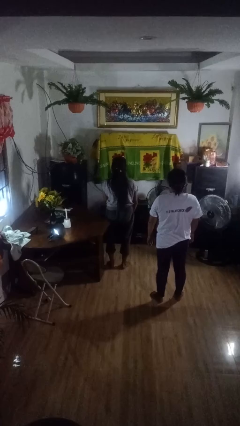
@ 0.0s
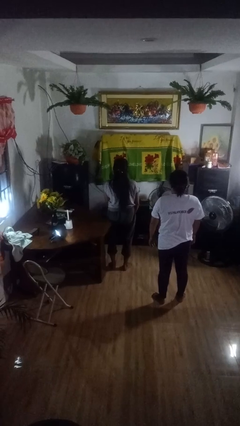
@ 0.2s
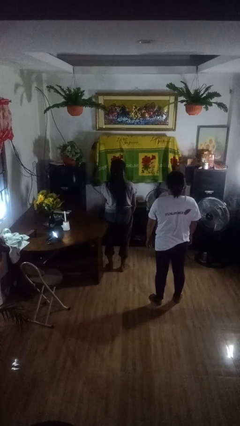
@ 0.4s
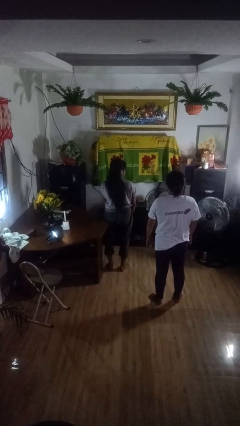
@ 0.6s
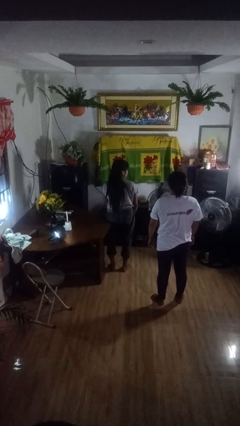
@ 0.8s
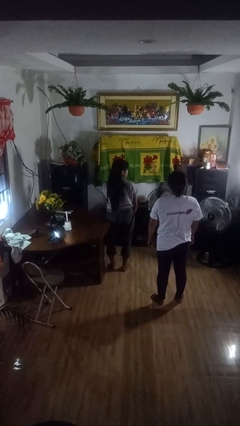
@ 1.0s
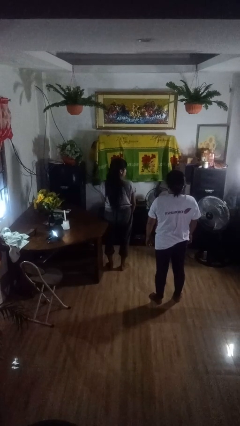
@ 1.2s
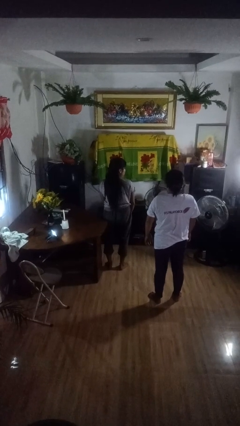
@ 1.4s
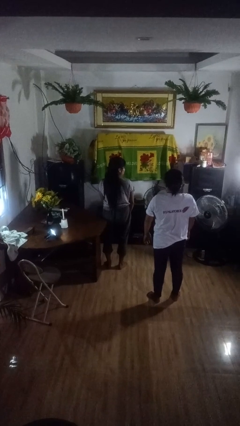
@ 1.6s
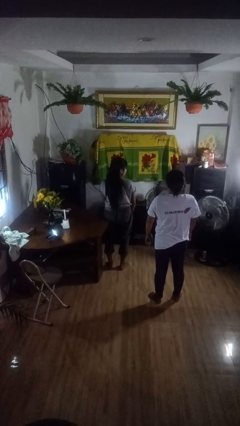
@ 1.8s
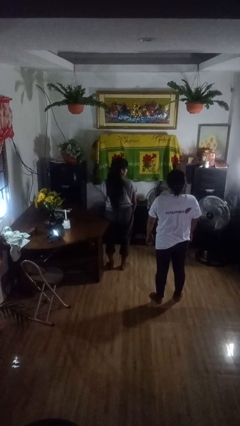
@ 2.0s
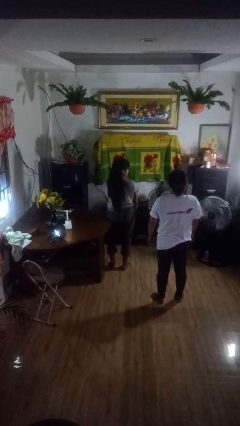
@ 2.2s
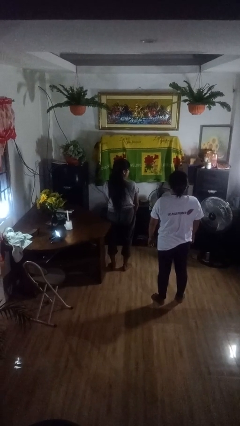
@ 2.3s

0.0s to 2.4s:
person looks over shoulder

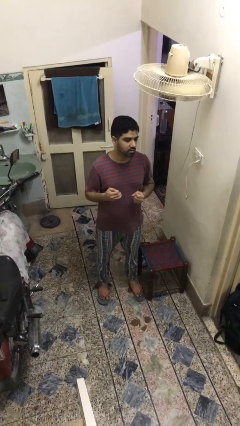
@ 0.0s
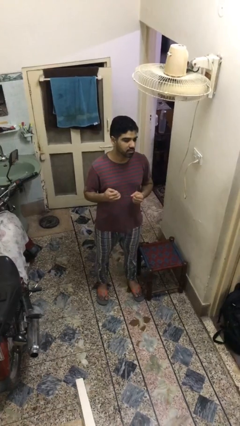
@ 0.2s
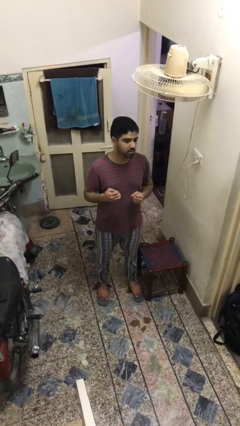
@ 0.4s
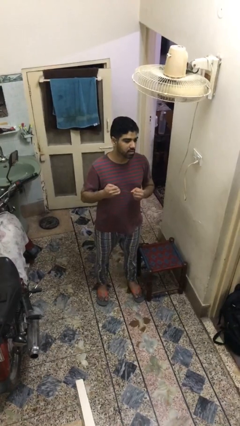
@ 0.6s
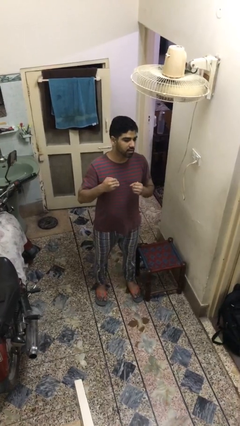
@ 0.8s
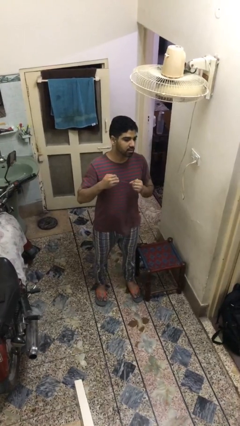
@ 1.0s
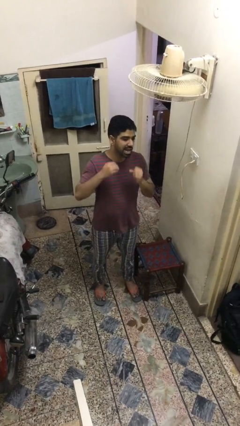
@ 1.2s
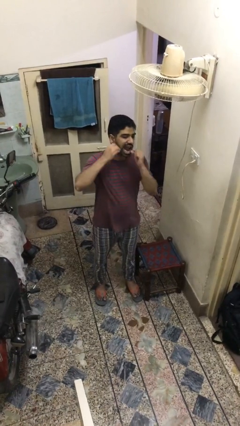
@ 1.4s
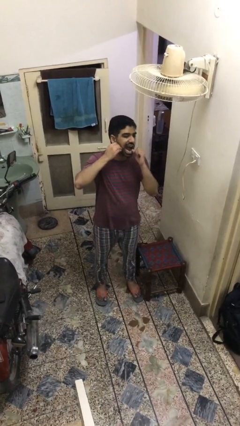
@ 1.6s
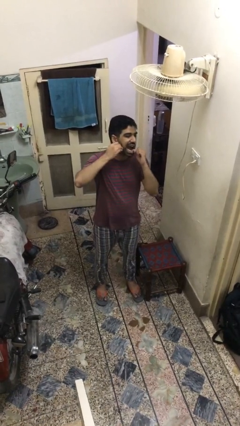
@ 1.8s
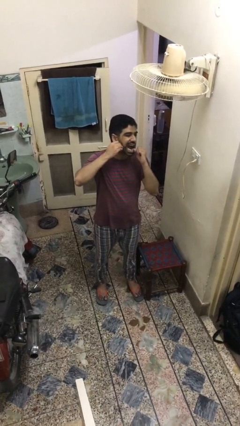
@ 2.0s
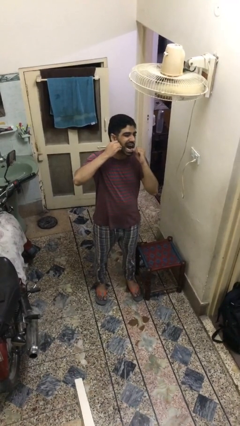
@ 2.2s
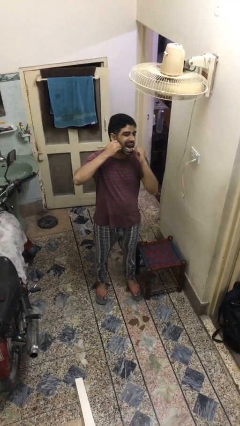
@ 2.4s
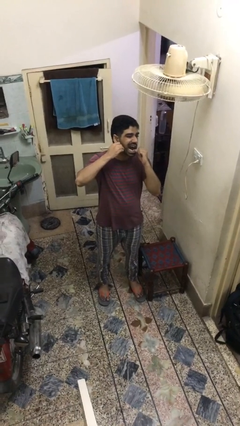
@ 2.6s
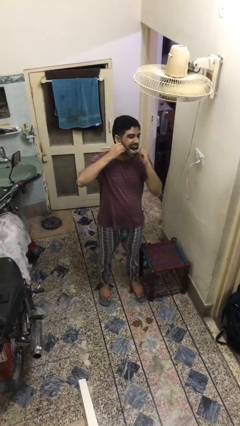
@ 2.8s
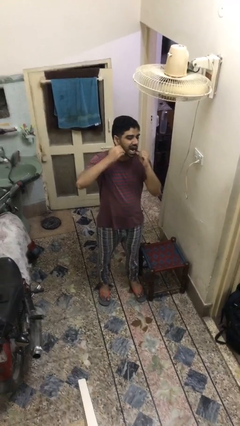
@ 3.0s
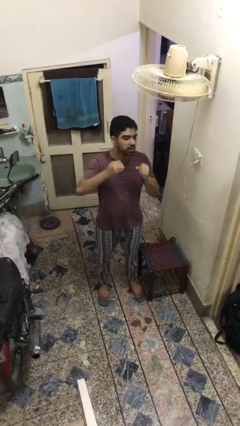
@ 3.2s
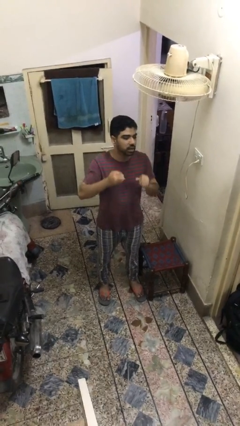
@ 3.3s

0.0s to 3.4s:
person flosses

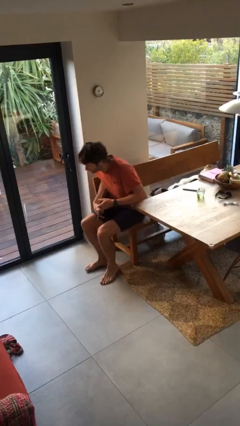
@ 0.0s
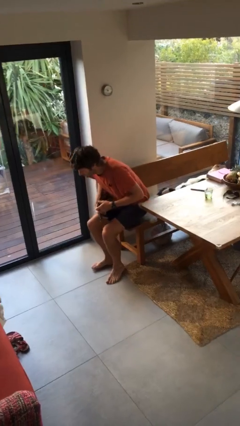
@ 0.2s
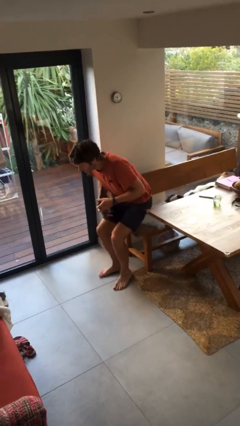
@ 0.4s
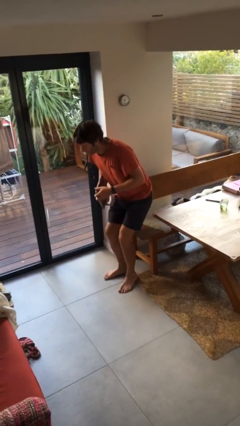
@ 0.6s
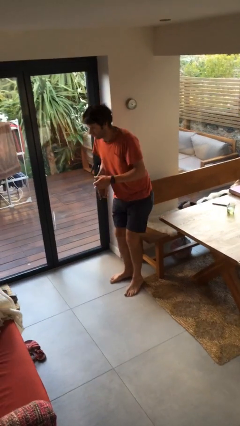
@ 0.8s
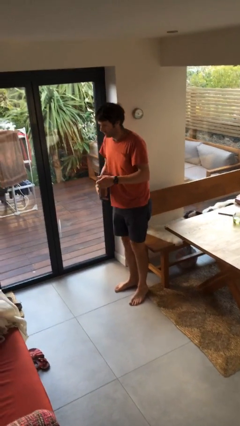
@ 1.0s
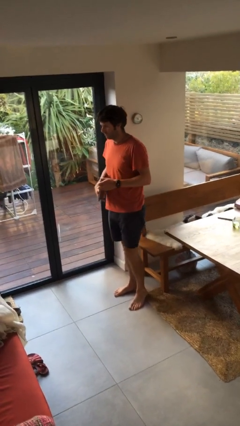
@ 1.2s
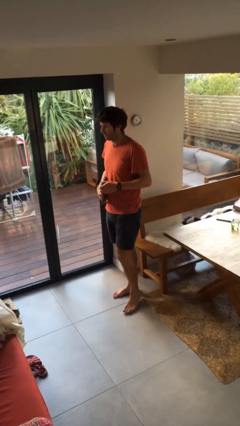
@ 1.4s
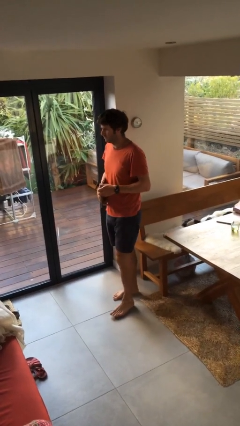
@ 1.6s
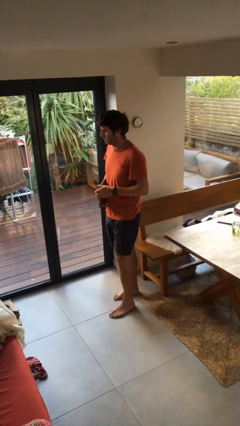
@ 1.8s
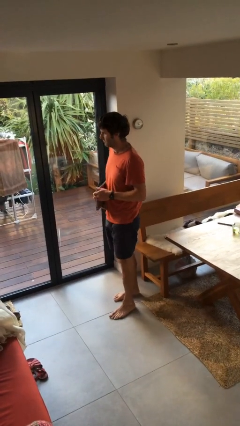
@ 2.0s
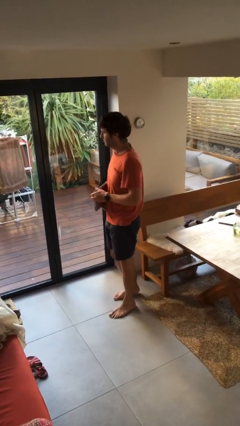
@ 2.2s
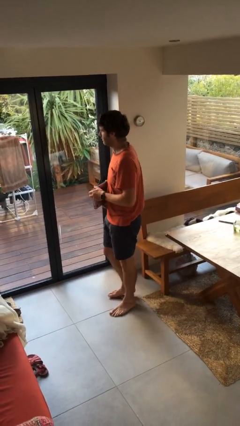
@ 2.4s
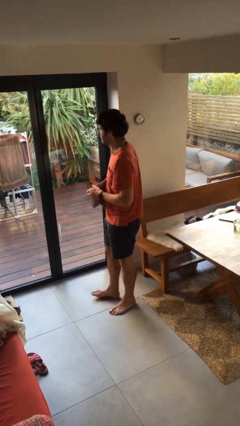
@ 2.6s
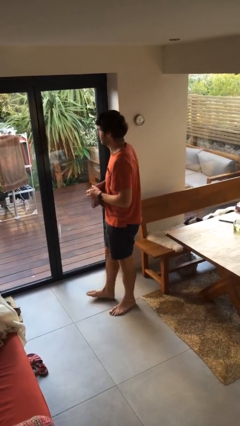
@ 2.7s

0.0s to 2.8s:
person stands up

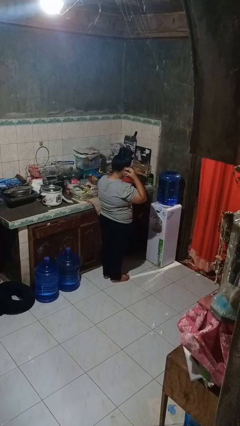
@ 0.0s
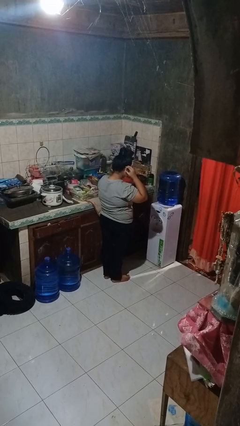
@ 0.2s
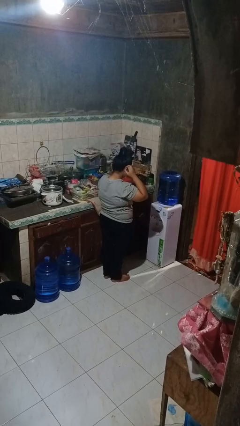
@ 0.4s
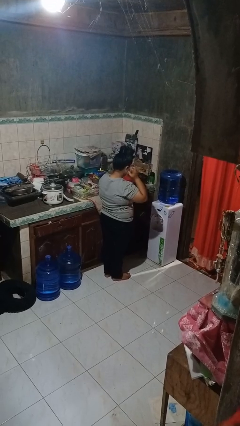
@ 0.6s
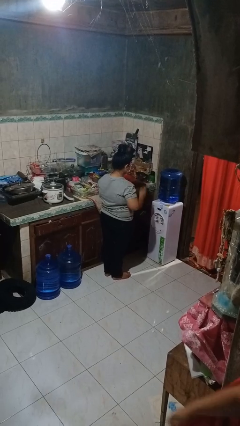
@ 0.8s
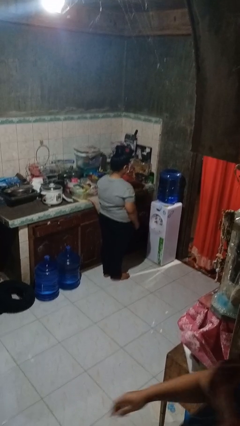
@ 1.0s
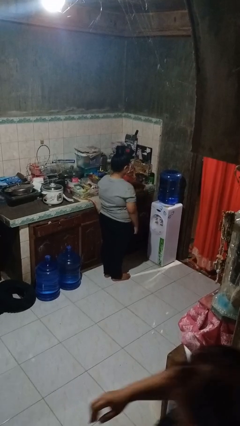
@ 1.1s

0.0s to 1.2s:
person puts on facemask

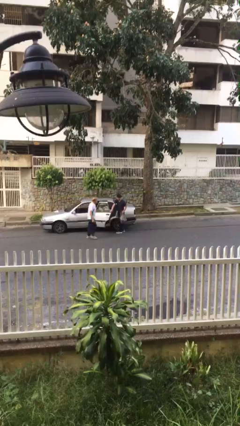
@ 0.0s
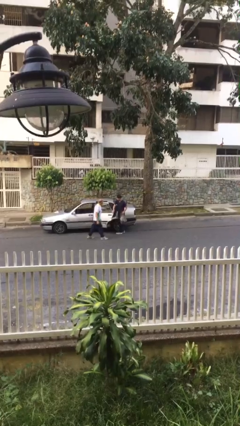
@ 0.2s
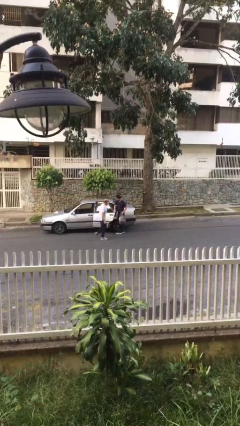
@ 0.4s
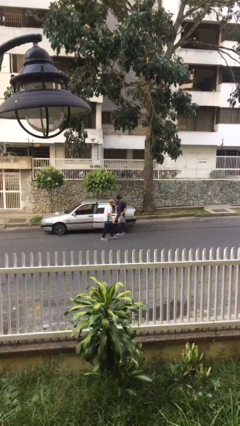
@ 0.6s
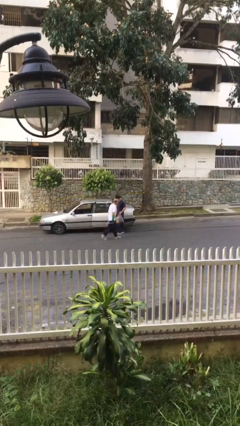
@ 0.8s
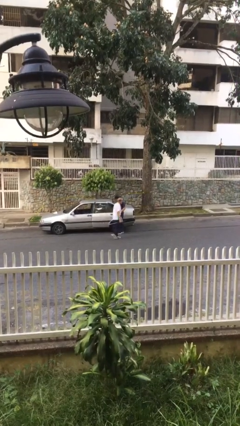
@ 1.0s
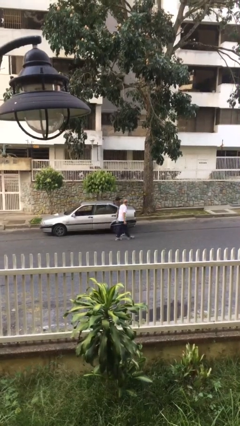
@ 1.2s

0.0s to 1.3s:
person closes car door

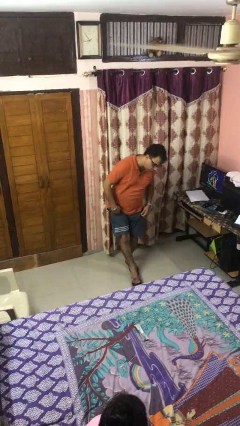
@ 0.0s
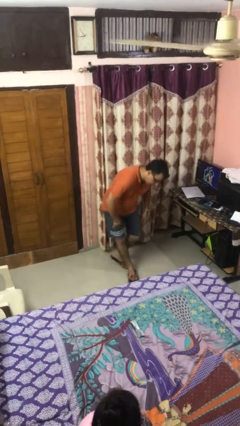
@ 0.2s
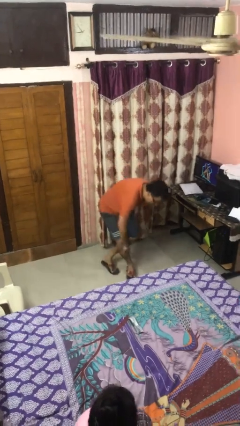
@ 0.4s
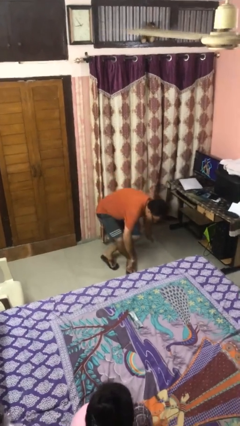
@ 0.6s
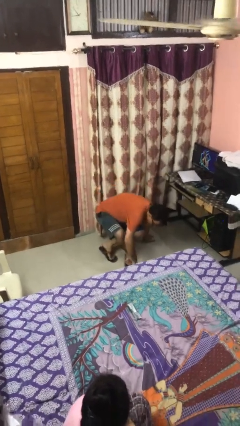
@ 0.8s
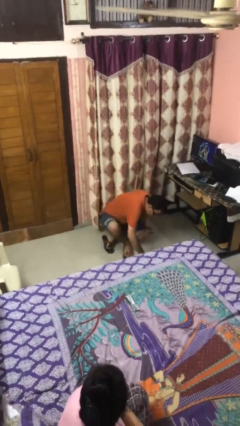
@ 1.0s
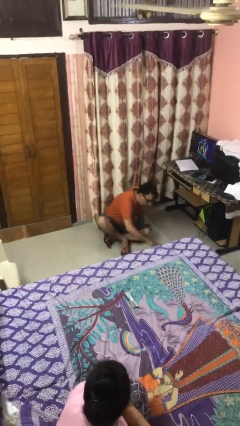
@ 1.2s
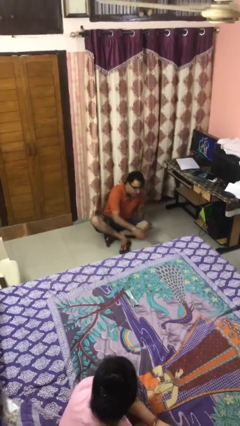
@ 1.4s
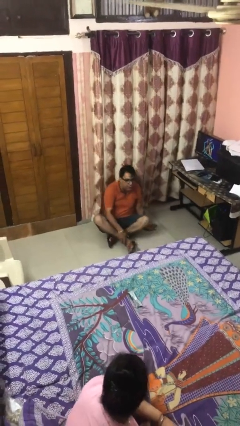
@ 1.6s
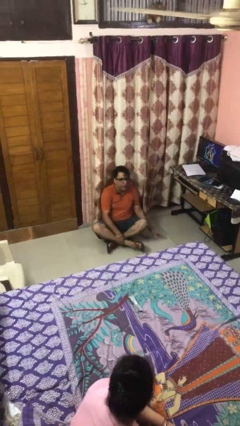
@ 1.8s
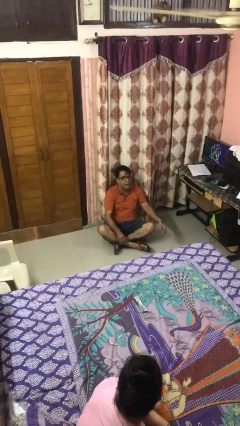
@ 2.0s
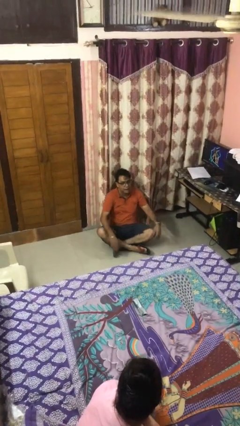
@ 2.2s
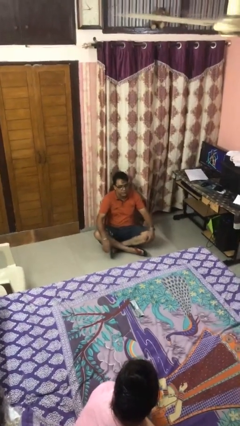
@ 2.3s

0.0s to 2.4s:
person sits crisscross

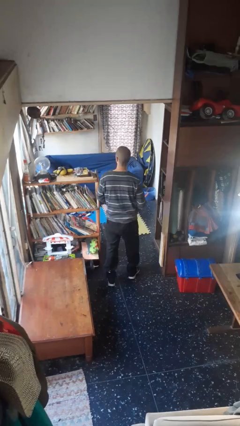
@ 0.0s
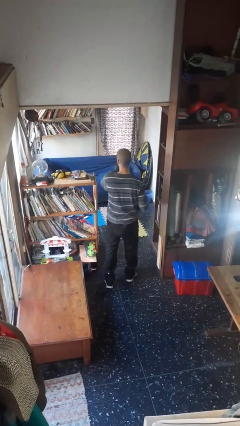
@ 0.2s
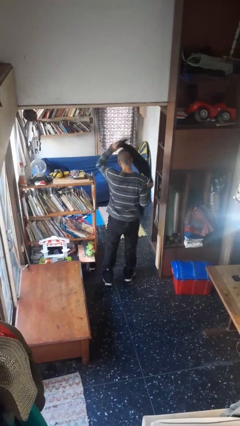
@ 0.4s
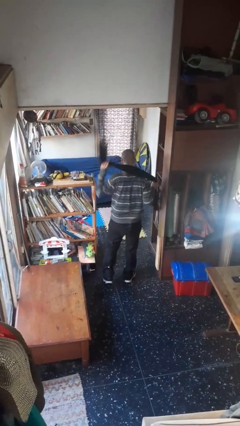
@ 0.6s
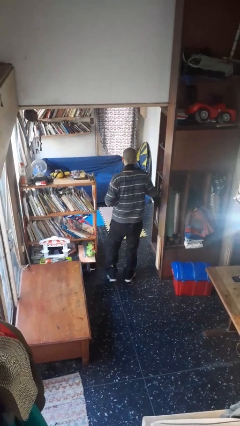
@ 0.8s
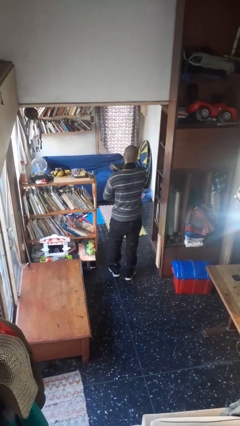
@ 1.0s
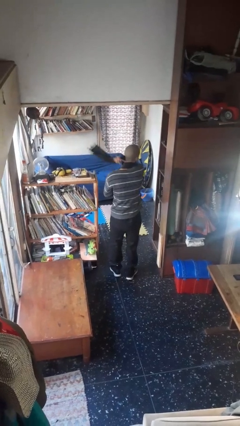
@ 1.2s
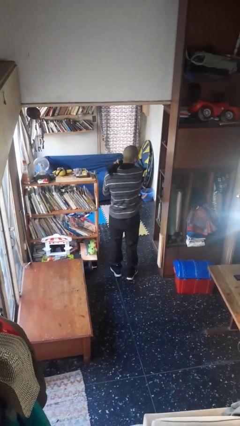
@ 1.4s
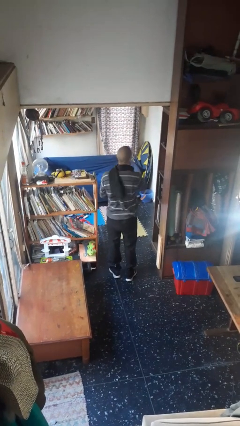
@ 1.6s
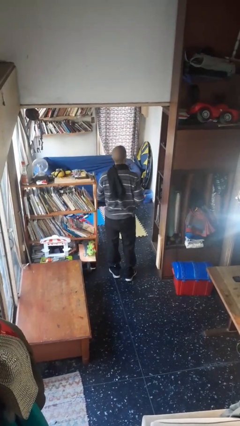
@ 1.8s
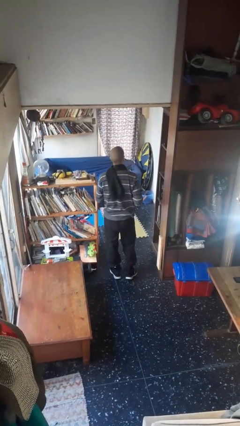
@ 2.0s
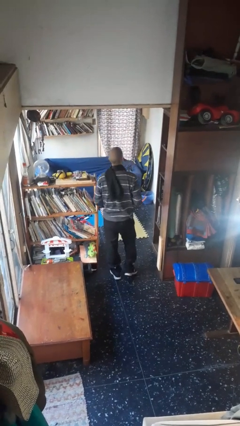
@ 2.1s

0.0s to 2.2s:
person puts on scarf

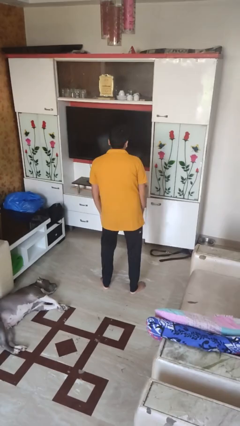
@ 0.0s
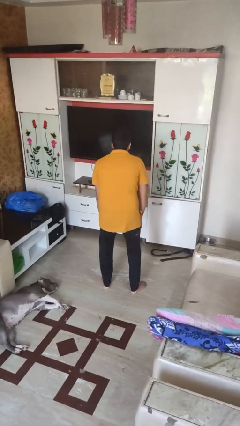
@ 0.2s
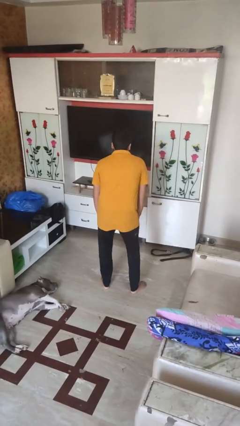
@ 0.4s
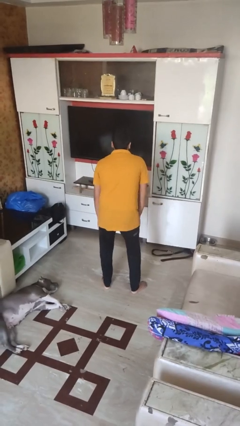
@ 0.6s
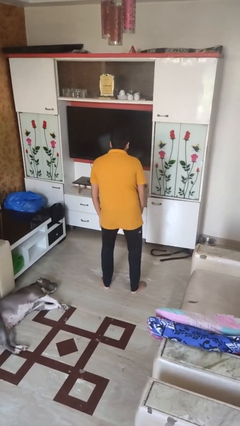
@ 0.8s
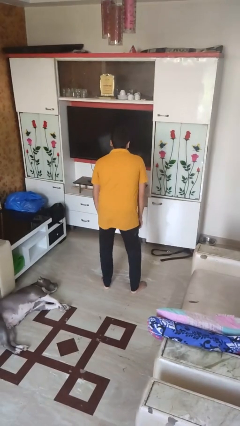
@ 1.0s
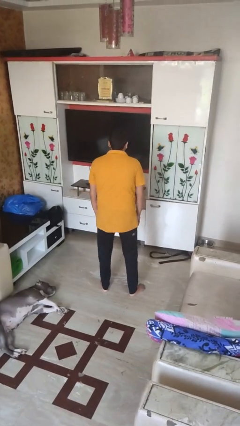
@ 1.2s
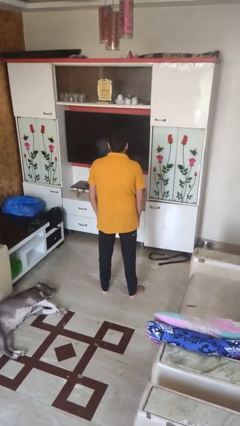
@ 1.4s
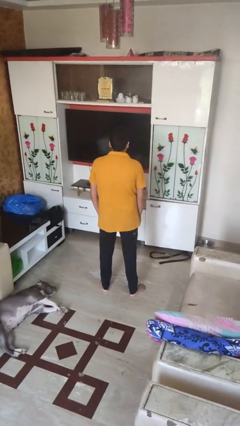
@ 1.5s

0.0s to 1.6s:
person wiggles hips
